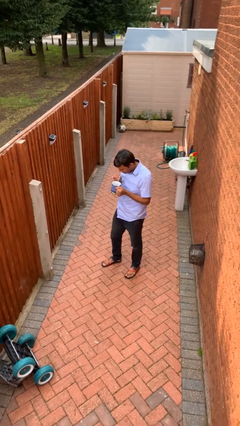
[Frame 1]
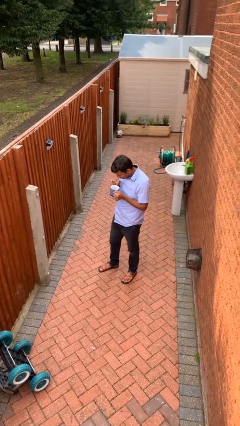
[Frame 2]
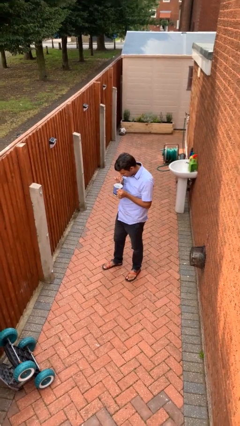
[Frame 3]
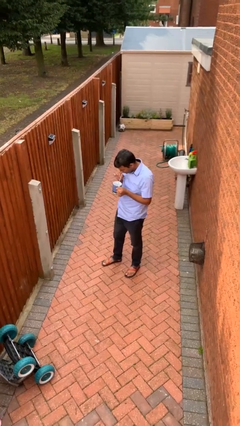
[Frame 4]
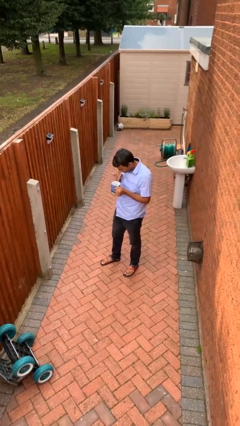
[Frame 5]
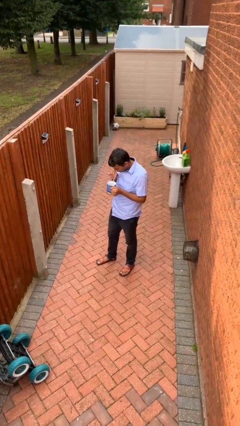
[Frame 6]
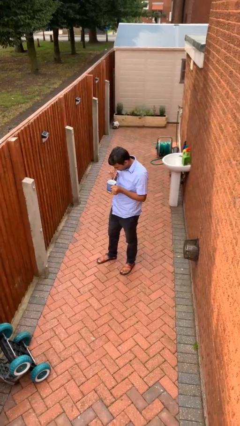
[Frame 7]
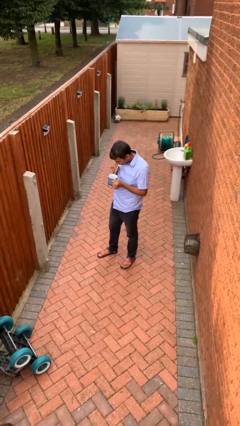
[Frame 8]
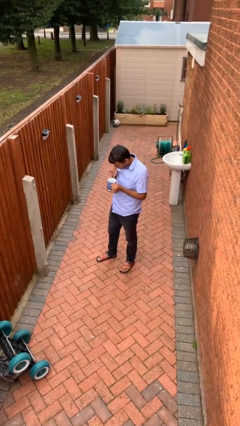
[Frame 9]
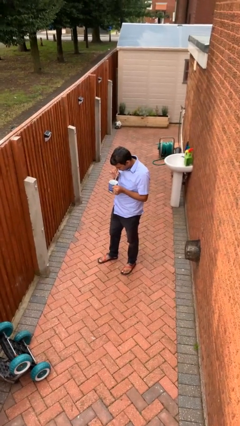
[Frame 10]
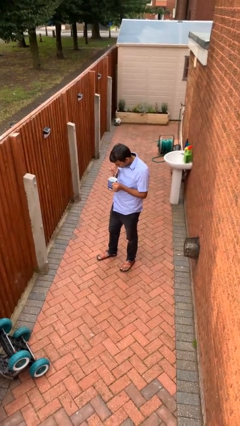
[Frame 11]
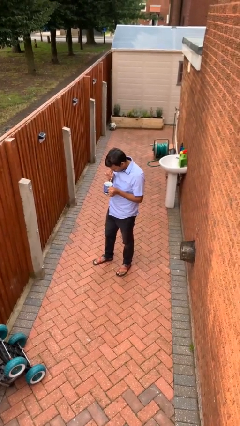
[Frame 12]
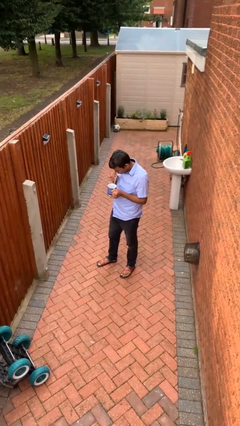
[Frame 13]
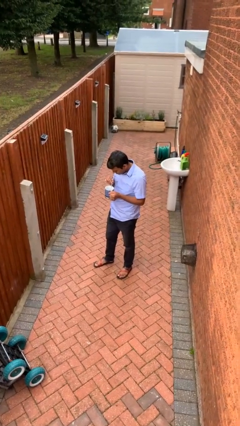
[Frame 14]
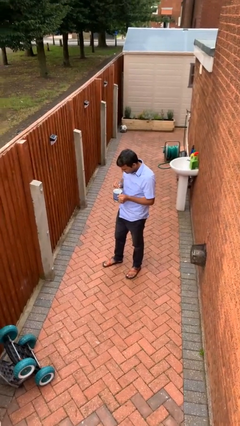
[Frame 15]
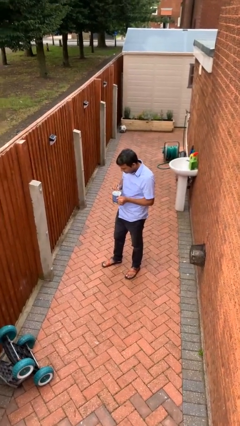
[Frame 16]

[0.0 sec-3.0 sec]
person drinks from straw

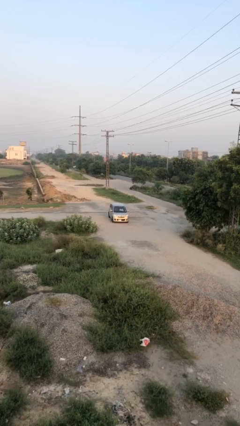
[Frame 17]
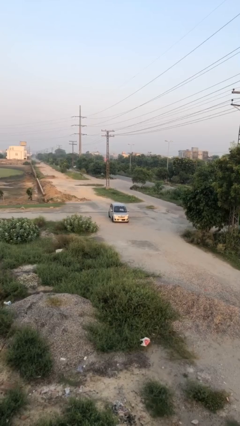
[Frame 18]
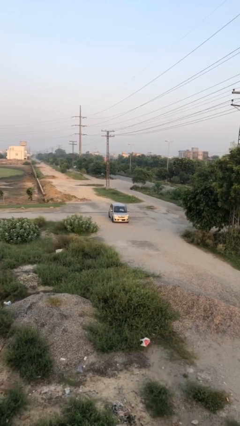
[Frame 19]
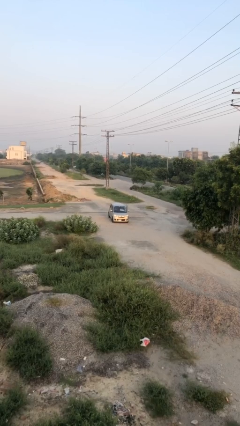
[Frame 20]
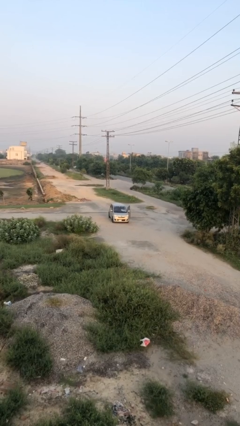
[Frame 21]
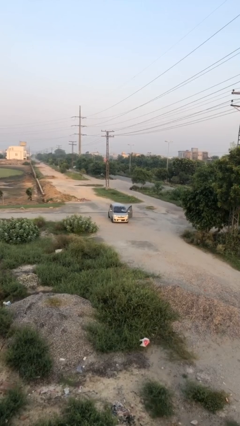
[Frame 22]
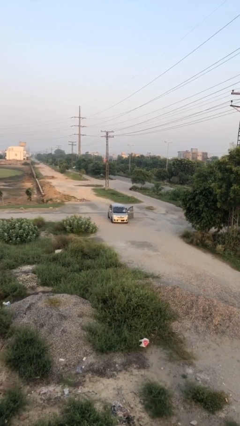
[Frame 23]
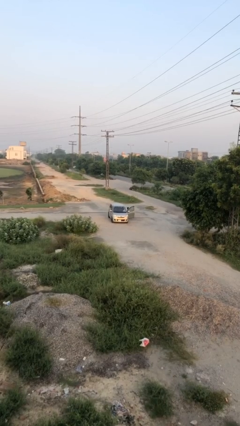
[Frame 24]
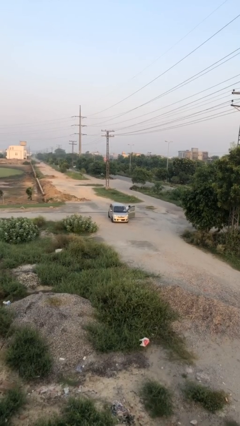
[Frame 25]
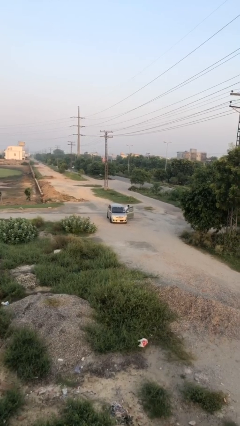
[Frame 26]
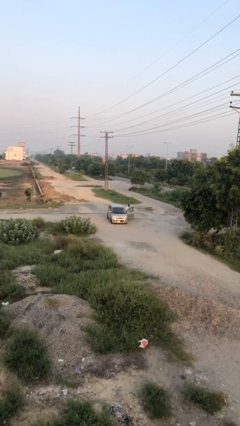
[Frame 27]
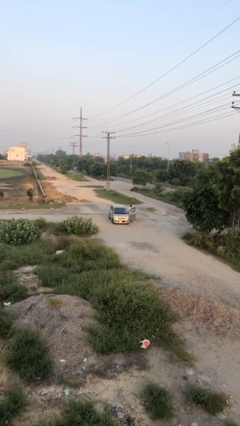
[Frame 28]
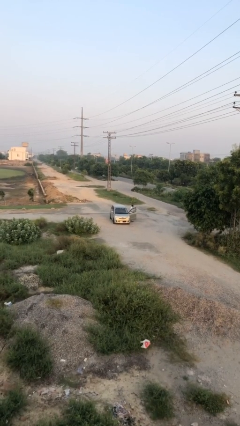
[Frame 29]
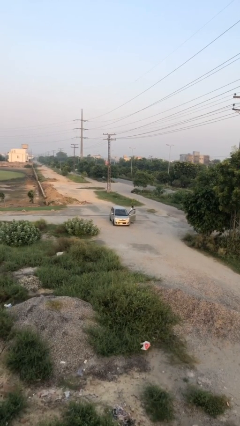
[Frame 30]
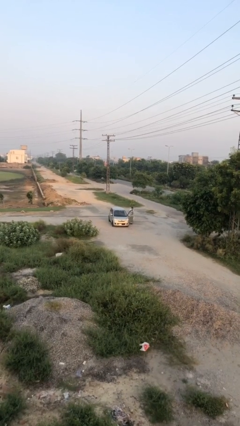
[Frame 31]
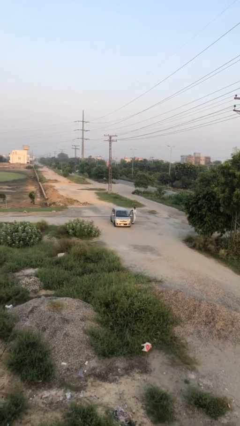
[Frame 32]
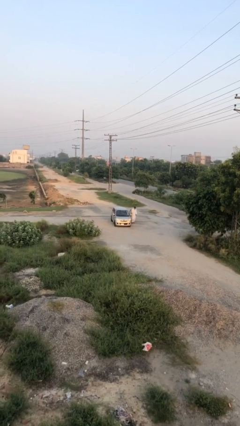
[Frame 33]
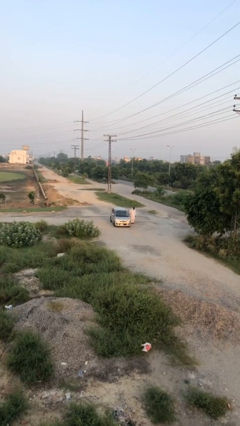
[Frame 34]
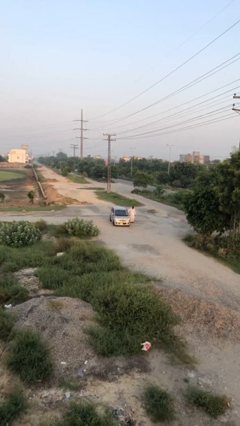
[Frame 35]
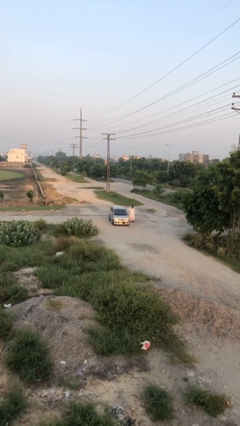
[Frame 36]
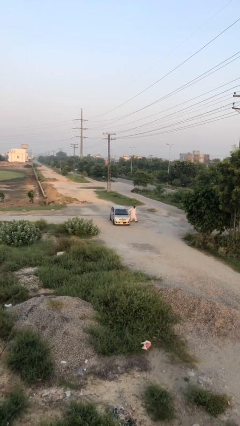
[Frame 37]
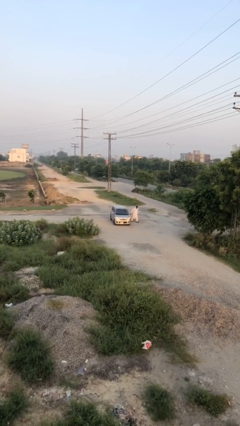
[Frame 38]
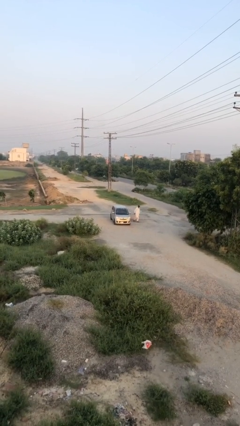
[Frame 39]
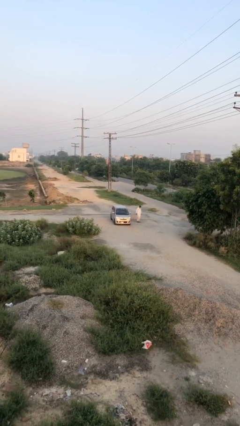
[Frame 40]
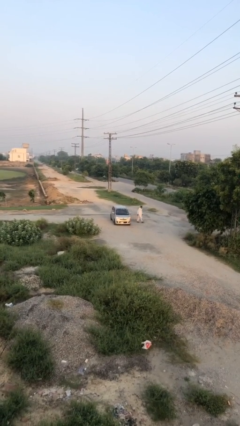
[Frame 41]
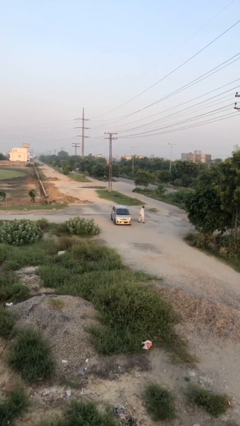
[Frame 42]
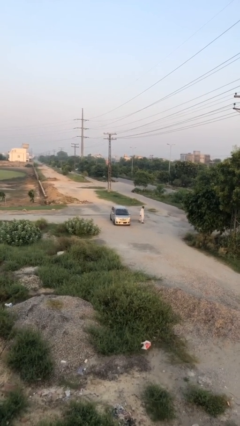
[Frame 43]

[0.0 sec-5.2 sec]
car drops off person

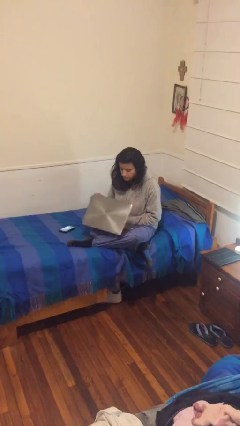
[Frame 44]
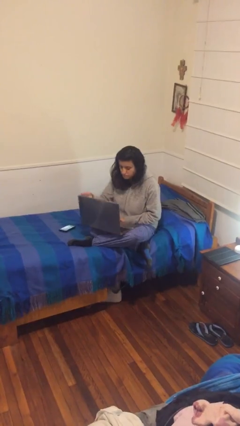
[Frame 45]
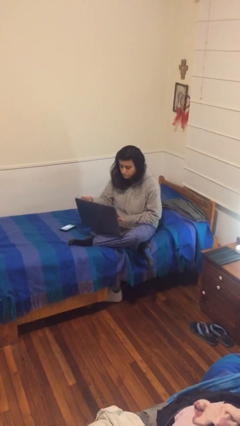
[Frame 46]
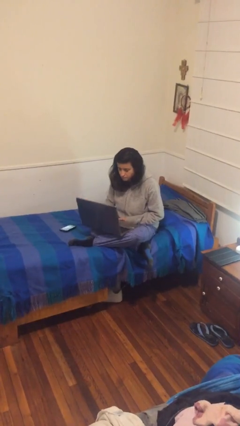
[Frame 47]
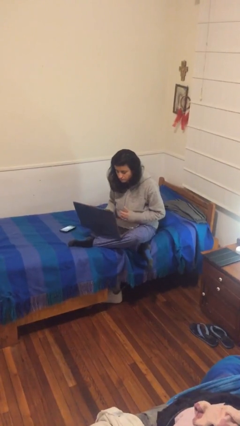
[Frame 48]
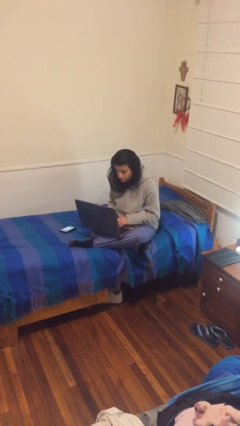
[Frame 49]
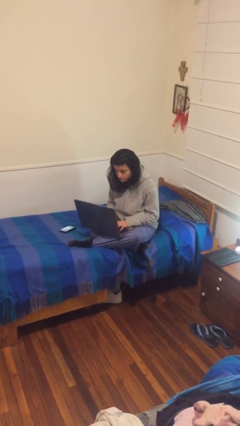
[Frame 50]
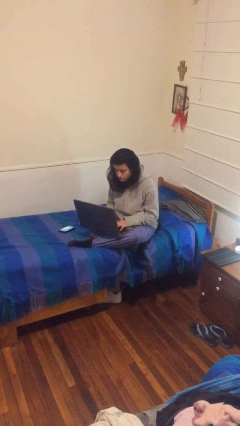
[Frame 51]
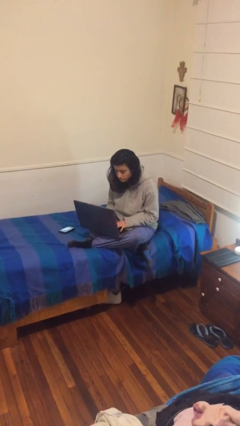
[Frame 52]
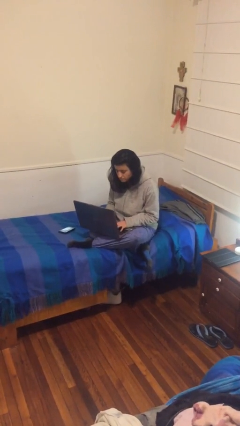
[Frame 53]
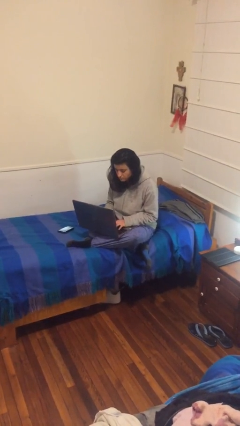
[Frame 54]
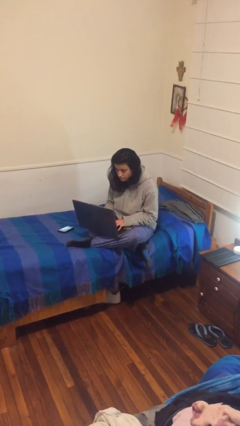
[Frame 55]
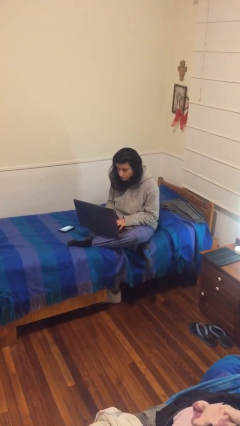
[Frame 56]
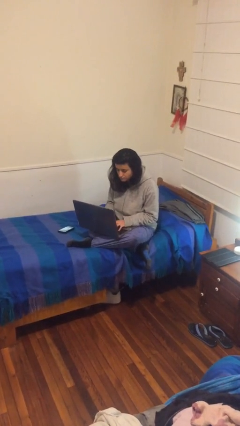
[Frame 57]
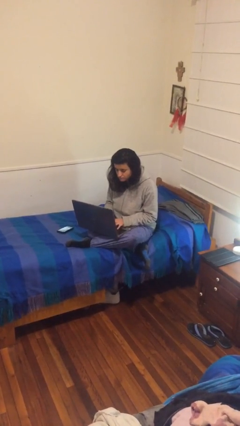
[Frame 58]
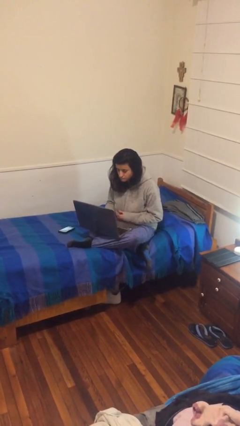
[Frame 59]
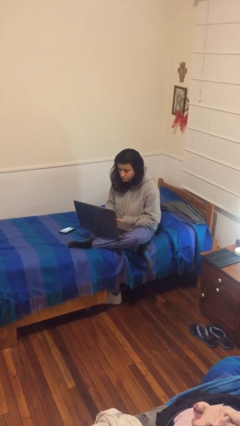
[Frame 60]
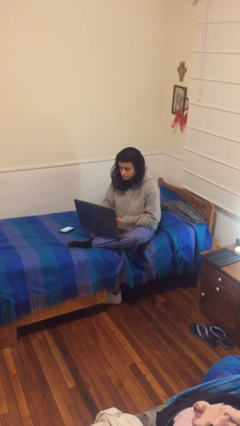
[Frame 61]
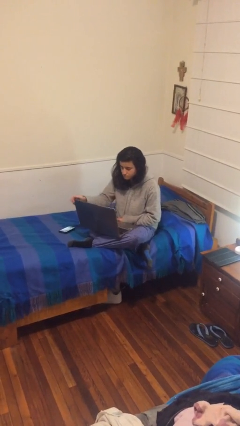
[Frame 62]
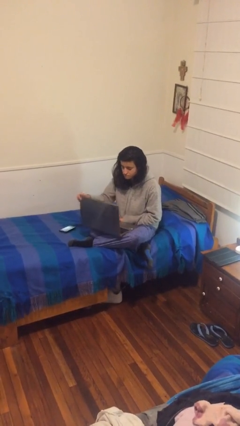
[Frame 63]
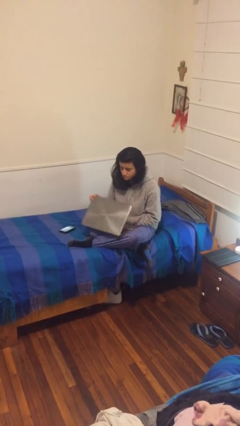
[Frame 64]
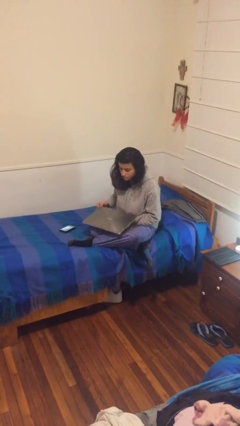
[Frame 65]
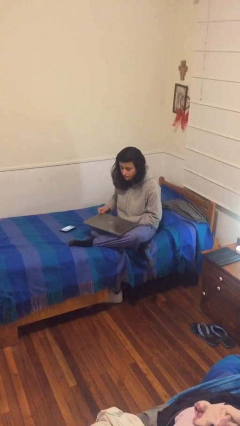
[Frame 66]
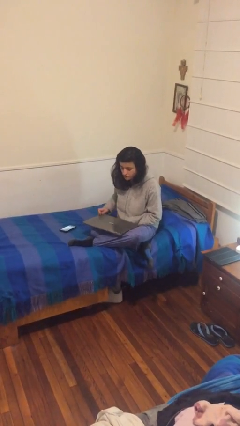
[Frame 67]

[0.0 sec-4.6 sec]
person interacts with laptop

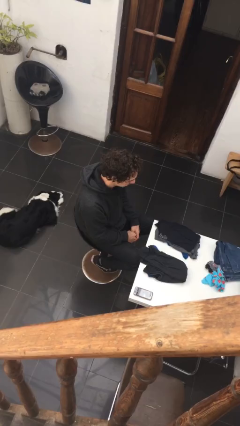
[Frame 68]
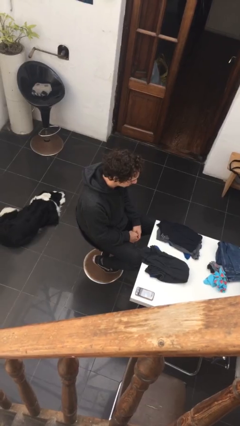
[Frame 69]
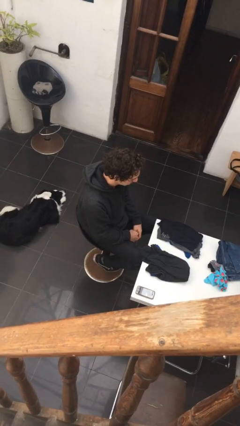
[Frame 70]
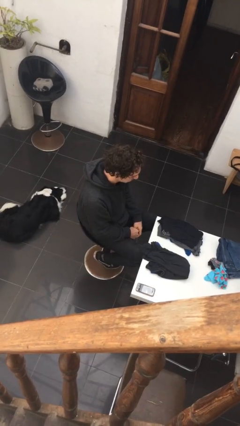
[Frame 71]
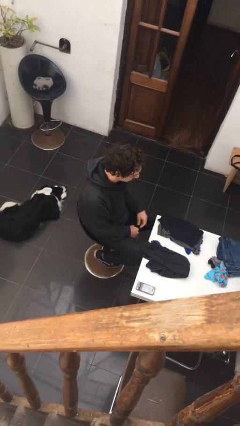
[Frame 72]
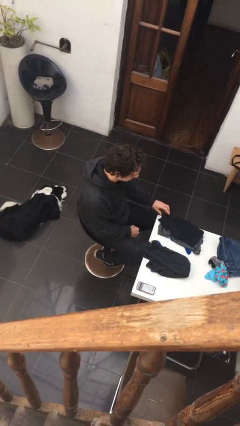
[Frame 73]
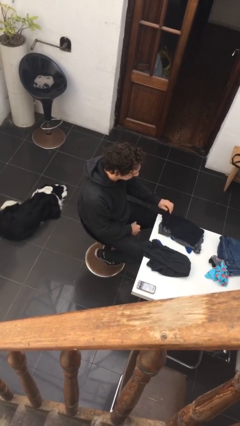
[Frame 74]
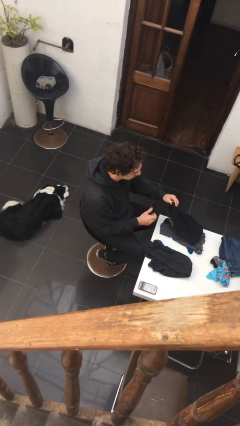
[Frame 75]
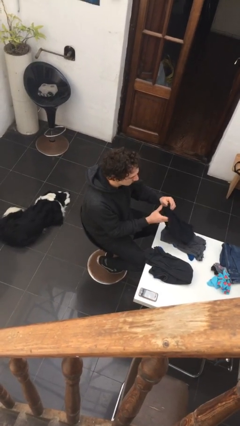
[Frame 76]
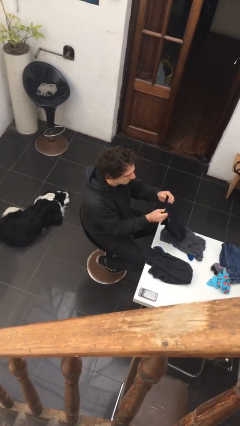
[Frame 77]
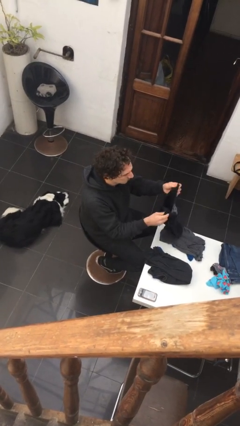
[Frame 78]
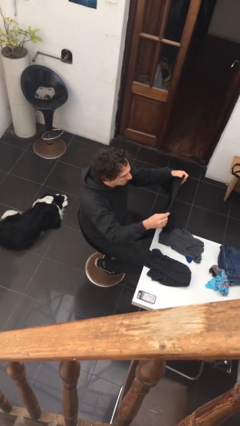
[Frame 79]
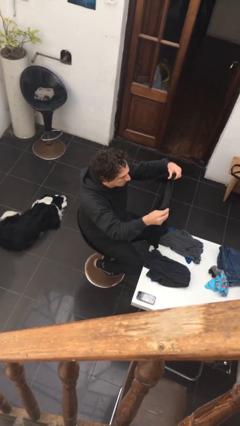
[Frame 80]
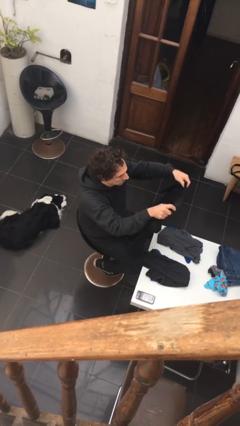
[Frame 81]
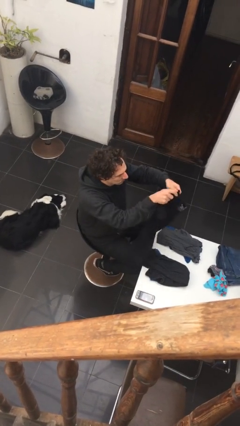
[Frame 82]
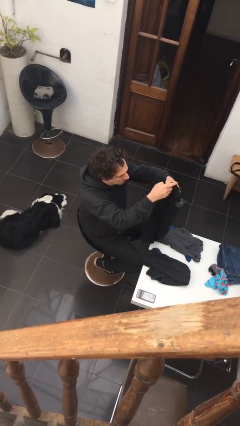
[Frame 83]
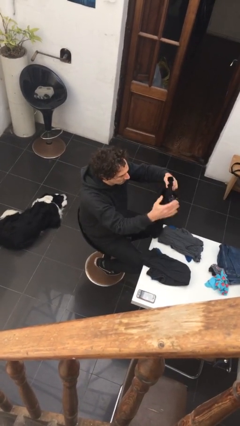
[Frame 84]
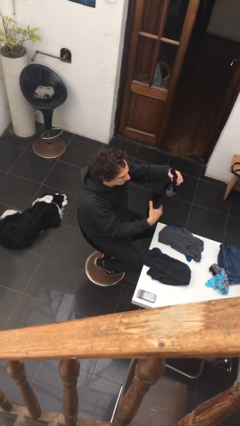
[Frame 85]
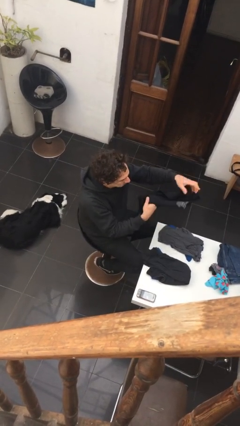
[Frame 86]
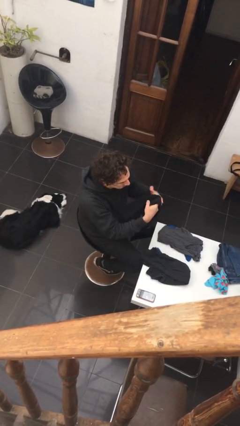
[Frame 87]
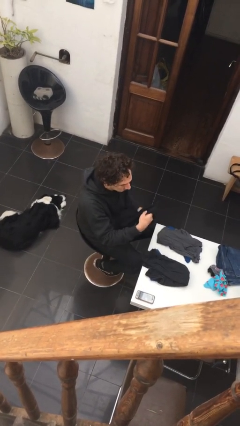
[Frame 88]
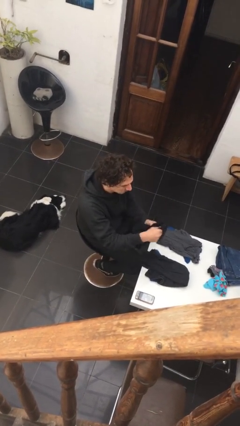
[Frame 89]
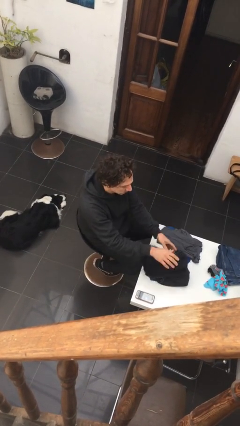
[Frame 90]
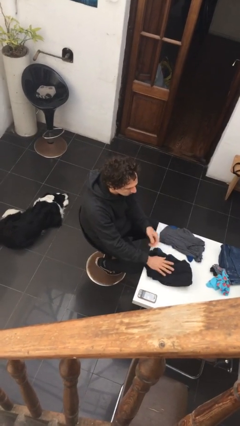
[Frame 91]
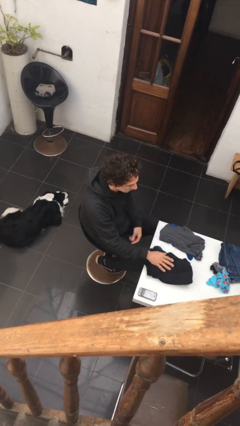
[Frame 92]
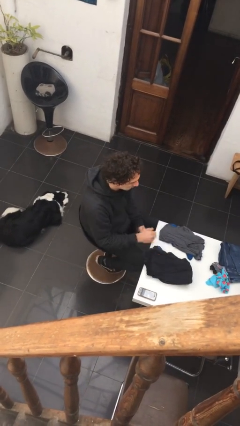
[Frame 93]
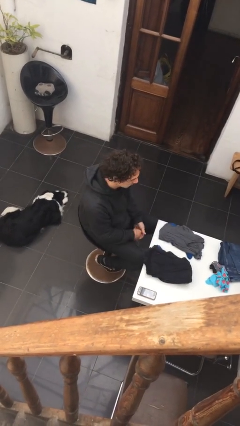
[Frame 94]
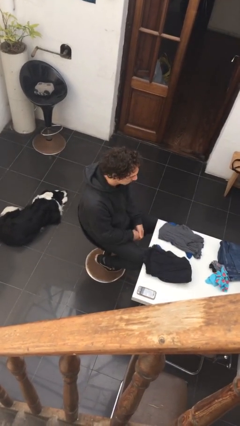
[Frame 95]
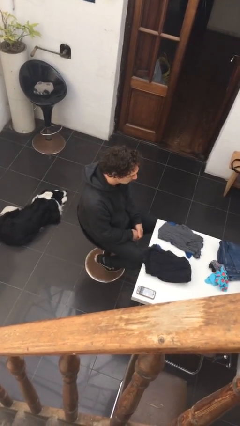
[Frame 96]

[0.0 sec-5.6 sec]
person folds shirt
